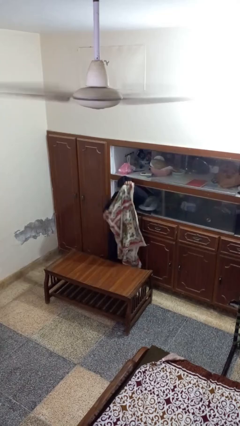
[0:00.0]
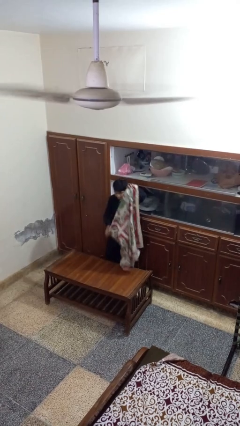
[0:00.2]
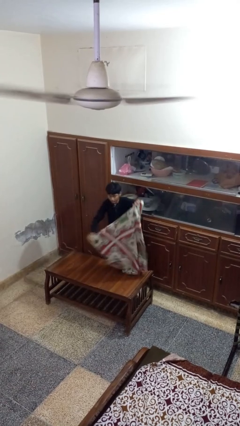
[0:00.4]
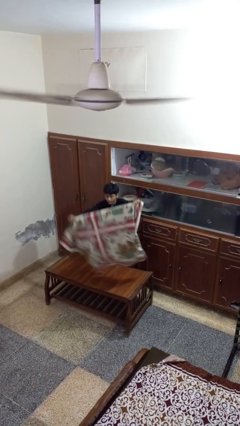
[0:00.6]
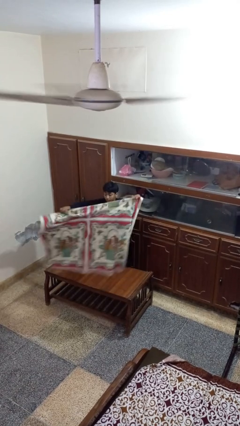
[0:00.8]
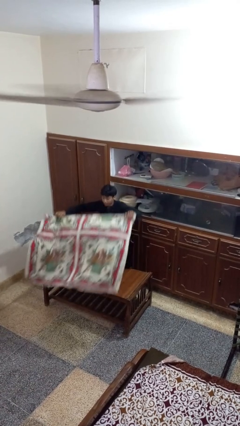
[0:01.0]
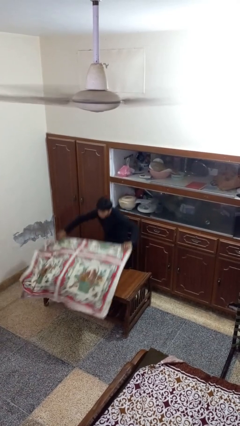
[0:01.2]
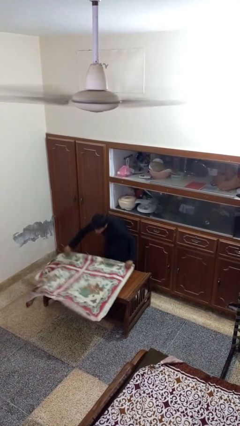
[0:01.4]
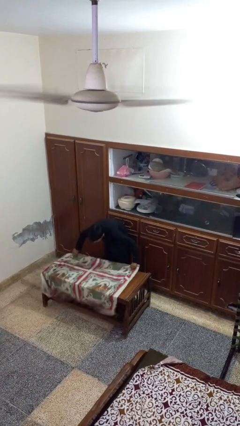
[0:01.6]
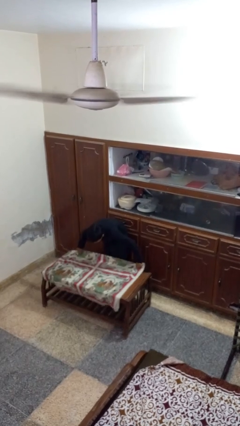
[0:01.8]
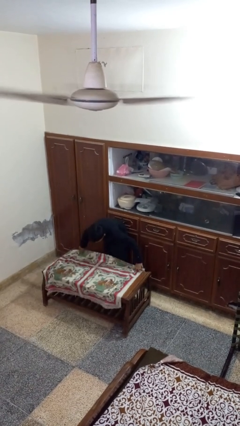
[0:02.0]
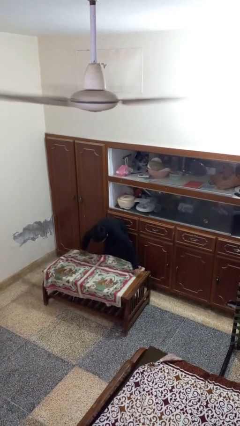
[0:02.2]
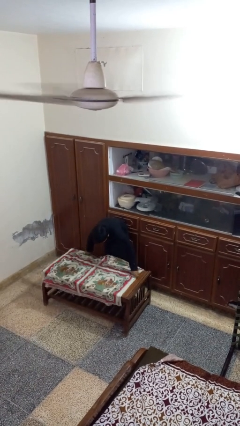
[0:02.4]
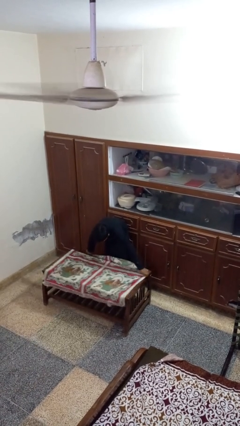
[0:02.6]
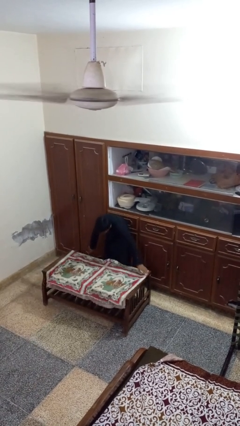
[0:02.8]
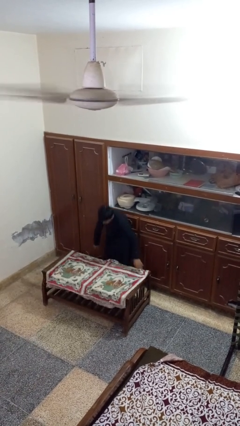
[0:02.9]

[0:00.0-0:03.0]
person spreads tablecloth

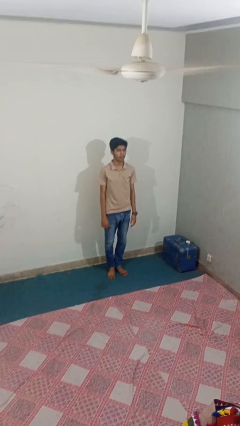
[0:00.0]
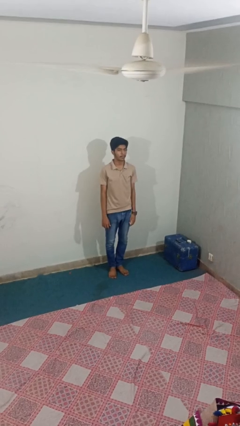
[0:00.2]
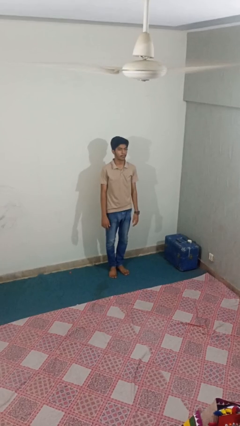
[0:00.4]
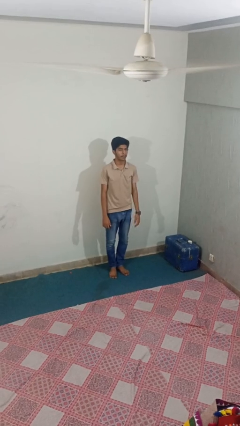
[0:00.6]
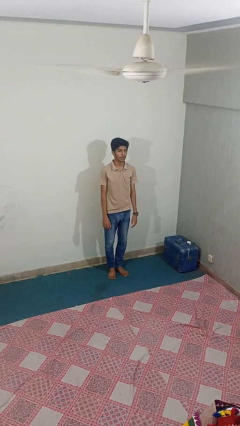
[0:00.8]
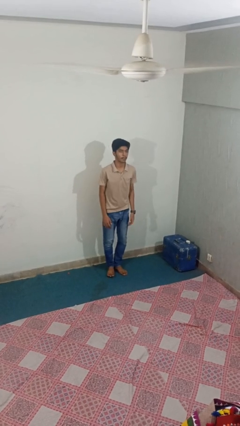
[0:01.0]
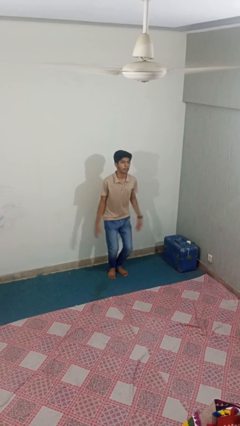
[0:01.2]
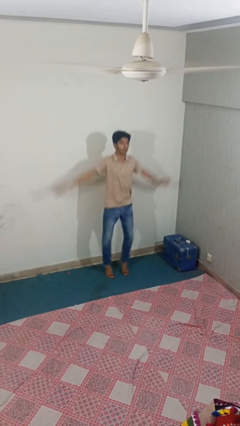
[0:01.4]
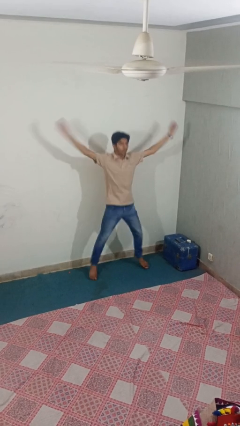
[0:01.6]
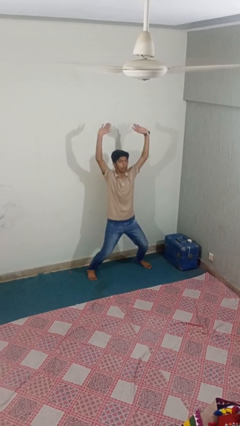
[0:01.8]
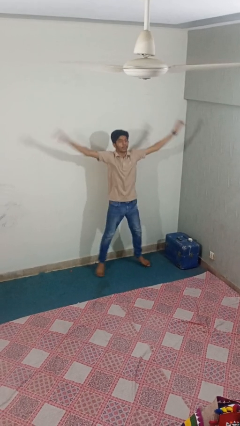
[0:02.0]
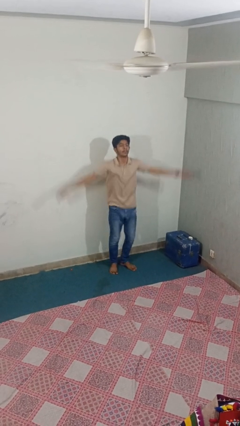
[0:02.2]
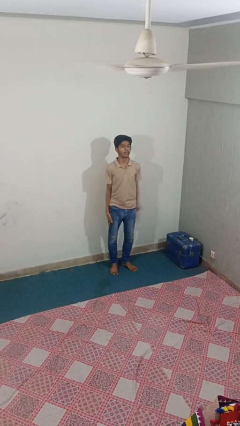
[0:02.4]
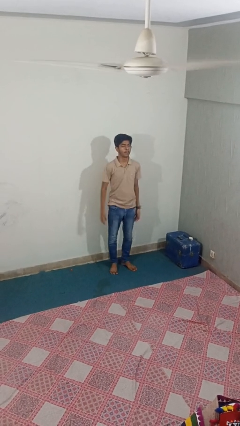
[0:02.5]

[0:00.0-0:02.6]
person exercises with jumping jacks

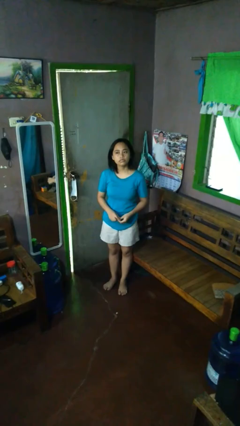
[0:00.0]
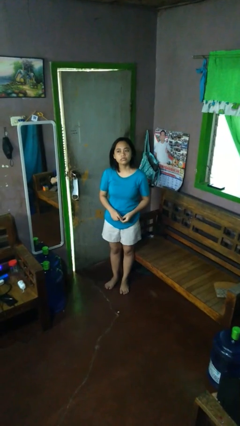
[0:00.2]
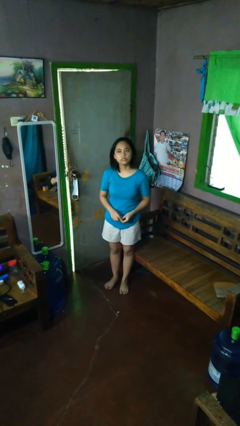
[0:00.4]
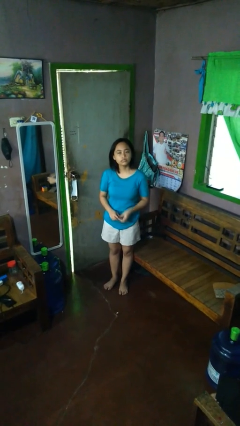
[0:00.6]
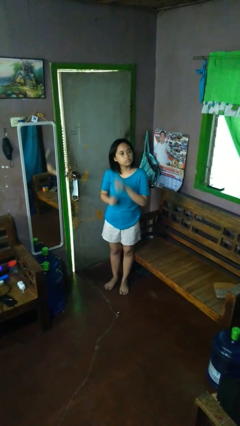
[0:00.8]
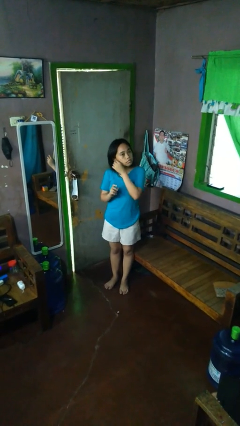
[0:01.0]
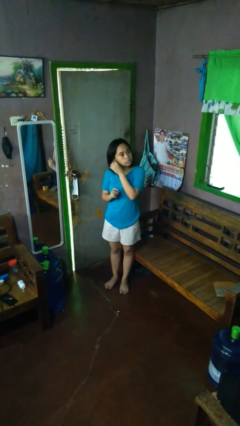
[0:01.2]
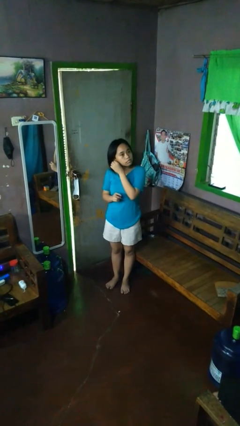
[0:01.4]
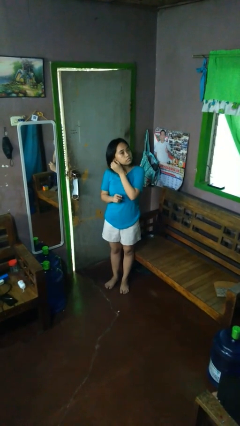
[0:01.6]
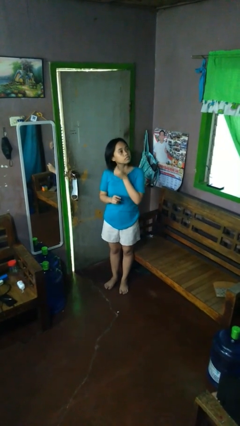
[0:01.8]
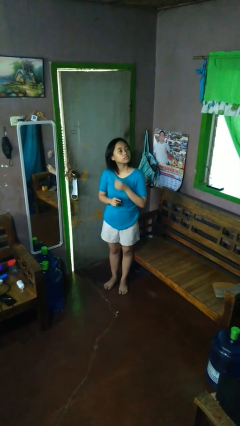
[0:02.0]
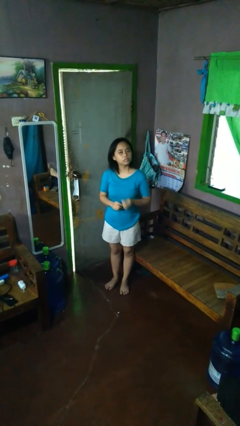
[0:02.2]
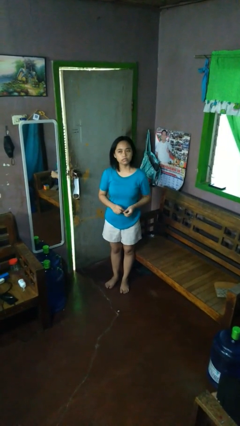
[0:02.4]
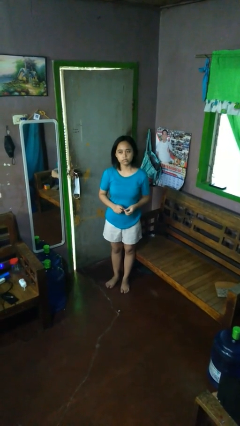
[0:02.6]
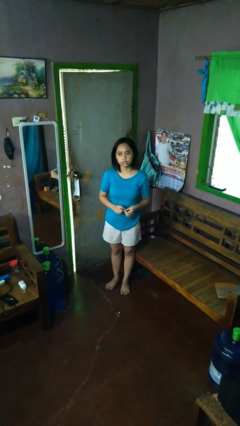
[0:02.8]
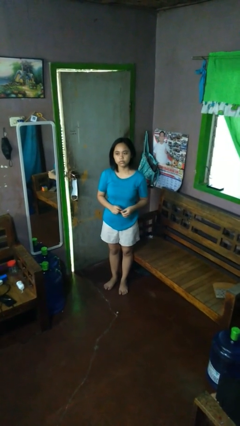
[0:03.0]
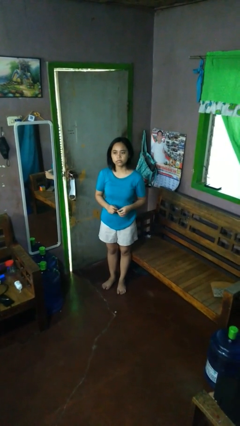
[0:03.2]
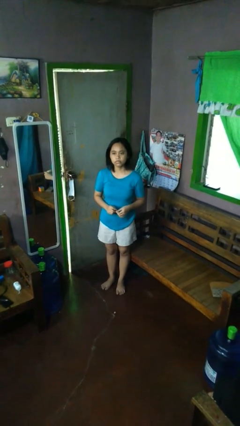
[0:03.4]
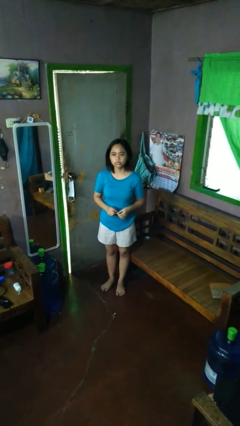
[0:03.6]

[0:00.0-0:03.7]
person takes off earrings

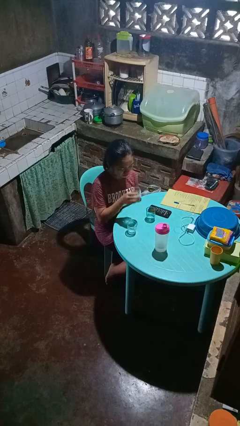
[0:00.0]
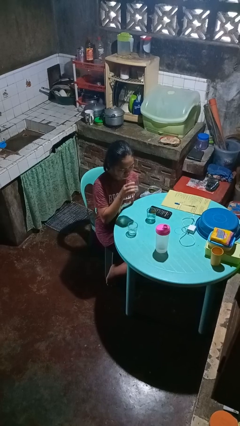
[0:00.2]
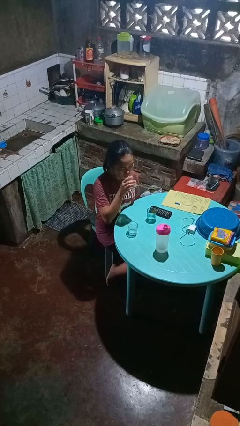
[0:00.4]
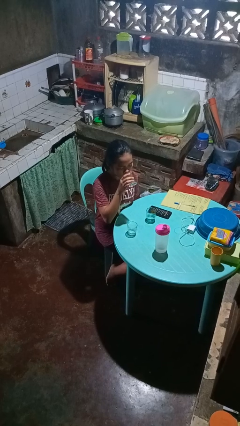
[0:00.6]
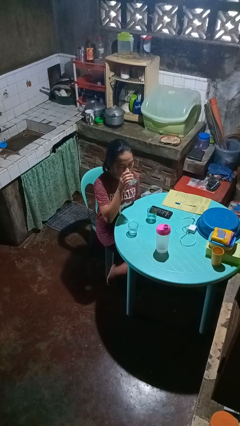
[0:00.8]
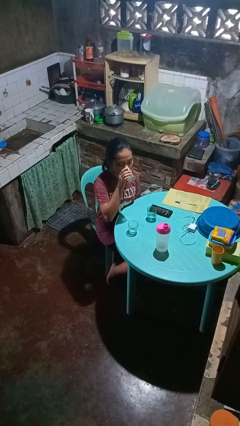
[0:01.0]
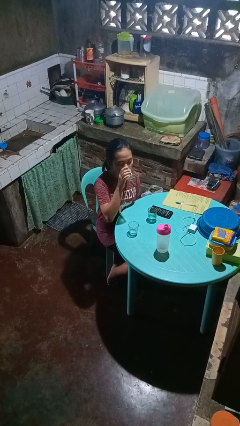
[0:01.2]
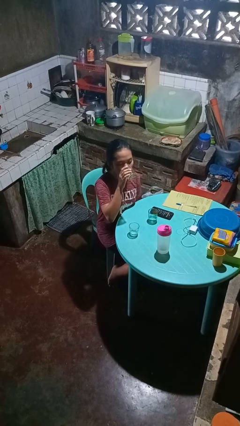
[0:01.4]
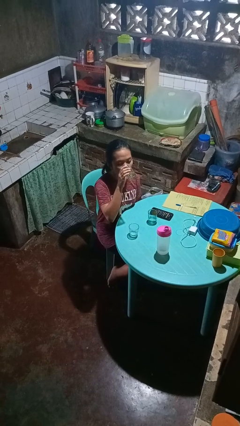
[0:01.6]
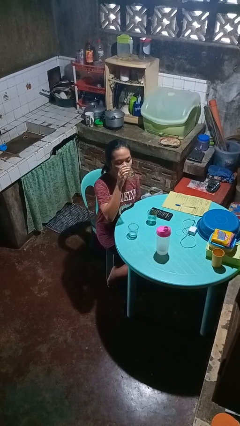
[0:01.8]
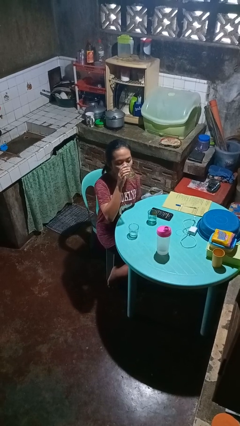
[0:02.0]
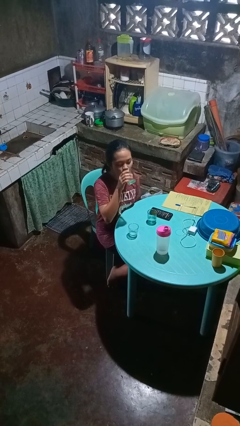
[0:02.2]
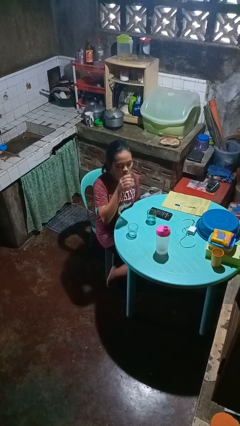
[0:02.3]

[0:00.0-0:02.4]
person drinks from shotglass

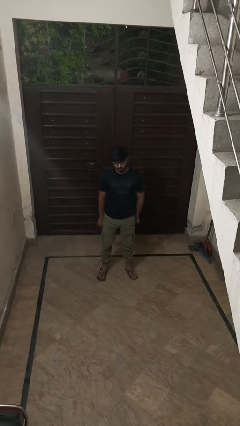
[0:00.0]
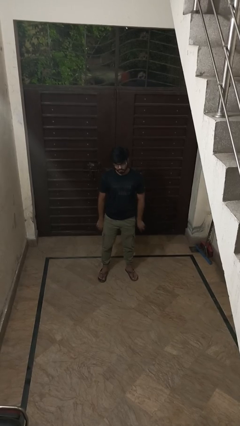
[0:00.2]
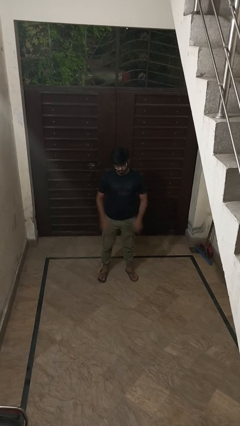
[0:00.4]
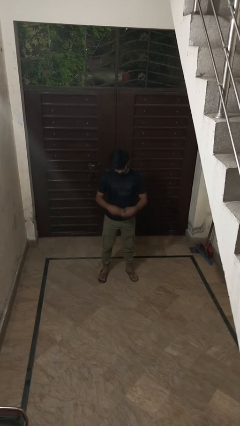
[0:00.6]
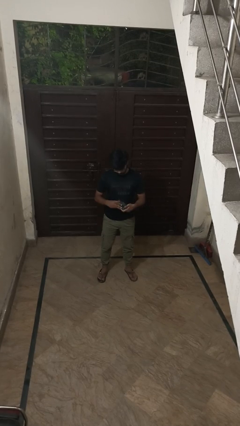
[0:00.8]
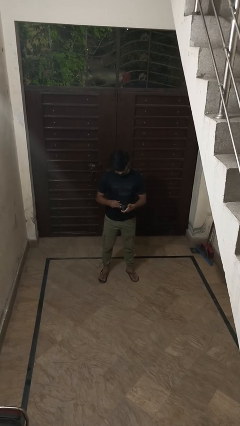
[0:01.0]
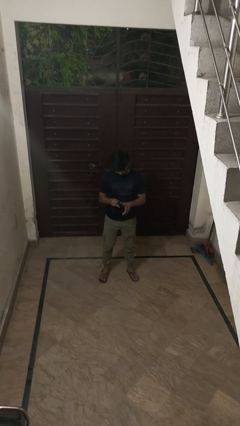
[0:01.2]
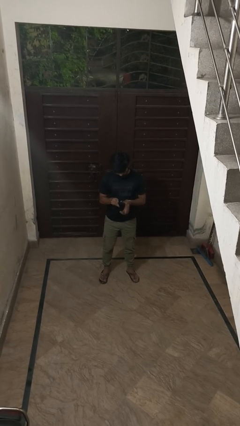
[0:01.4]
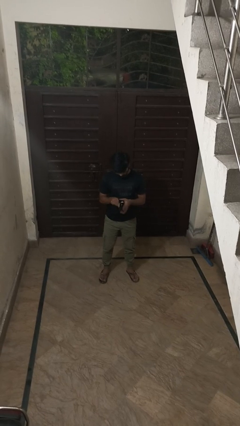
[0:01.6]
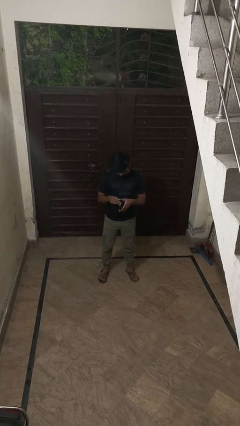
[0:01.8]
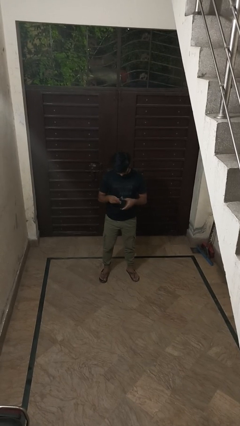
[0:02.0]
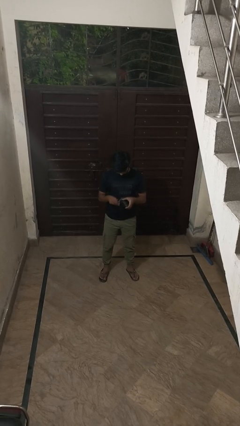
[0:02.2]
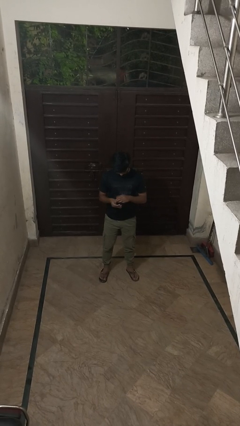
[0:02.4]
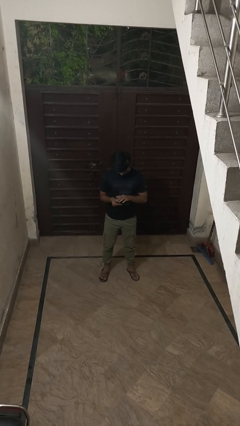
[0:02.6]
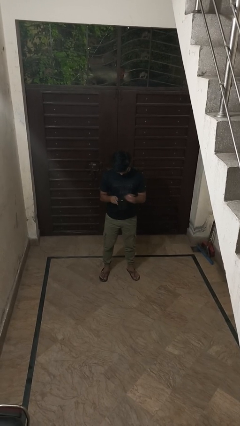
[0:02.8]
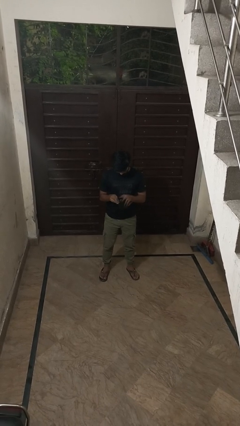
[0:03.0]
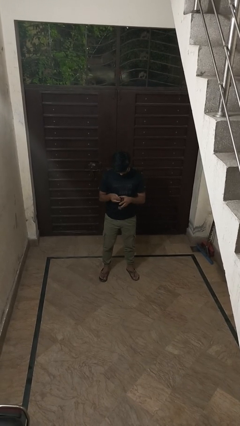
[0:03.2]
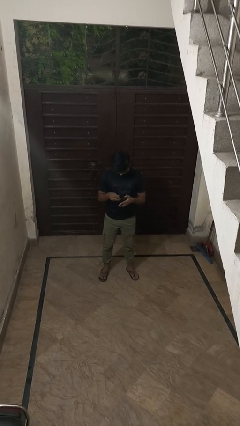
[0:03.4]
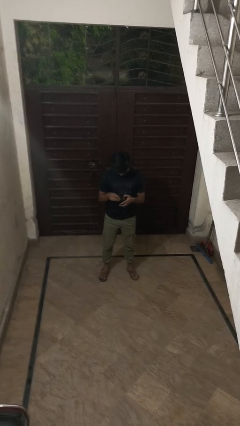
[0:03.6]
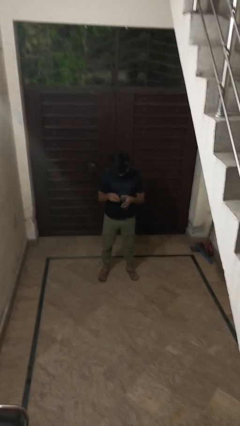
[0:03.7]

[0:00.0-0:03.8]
person searches in purse

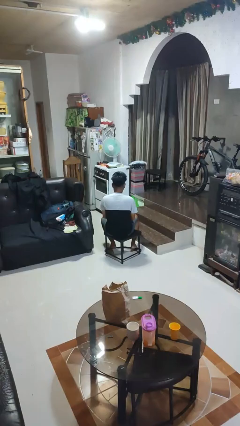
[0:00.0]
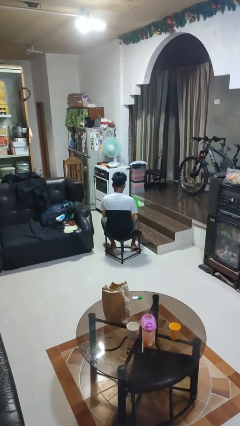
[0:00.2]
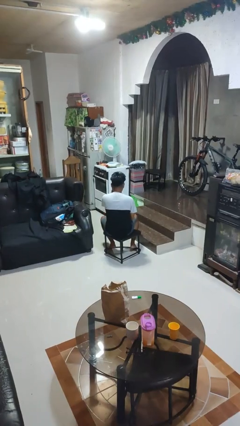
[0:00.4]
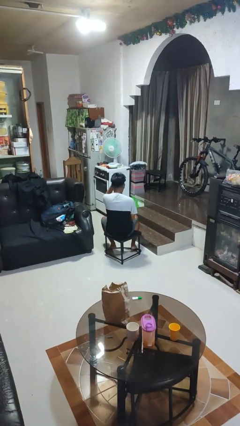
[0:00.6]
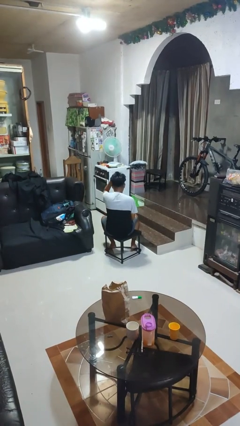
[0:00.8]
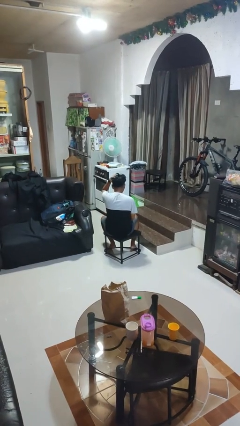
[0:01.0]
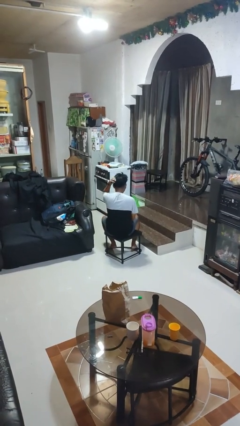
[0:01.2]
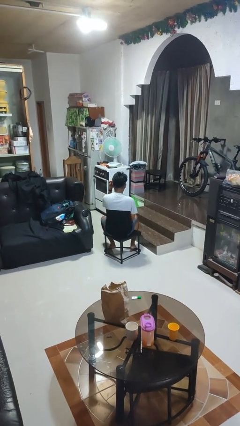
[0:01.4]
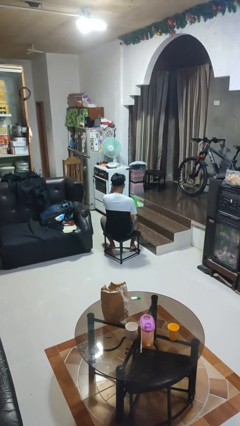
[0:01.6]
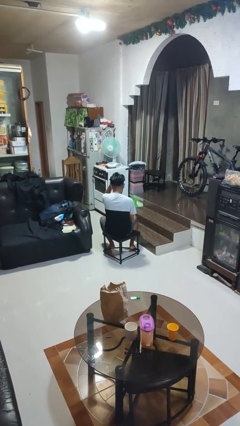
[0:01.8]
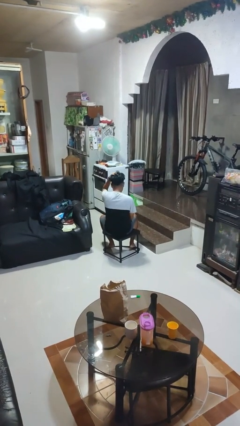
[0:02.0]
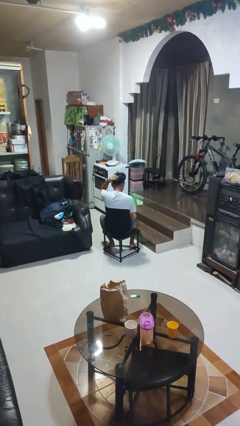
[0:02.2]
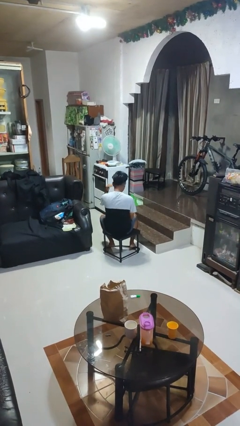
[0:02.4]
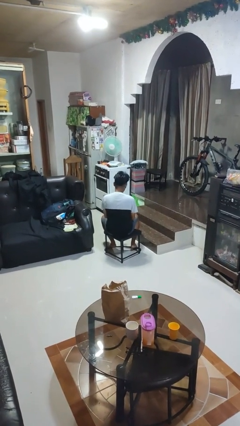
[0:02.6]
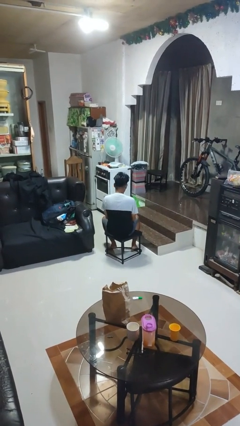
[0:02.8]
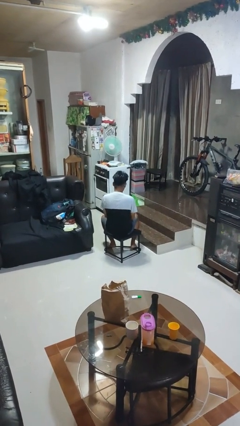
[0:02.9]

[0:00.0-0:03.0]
person strokes hair
